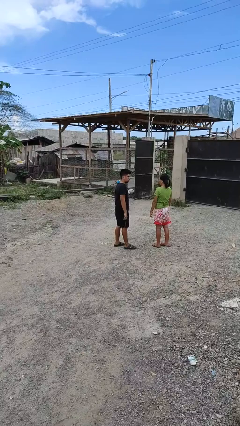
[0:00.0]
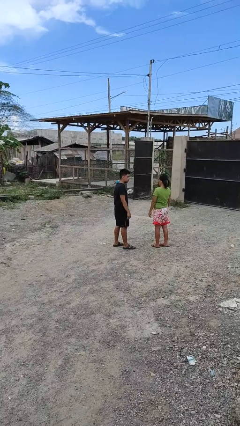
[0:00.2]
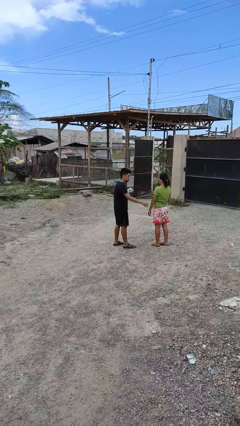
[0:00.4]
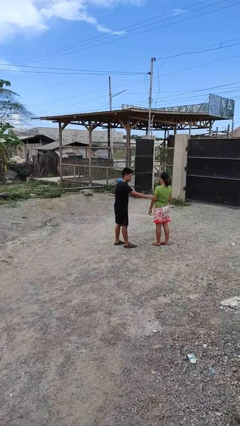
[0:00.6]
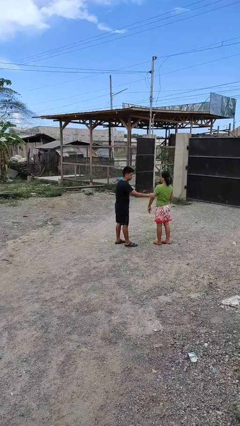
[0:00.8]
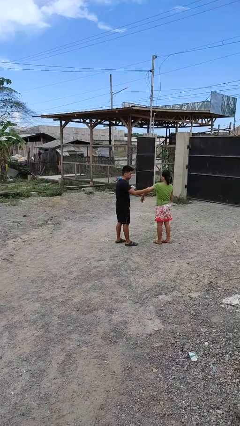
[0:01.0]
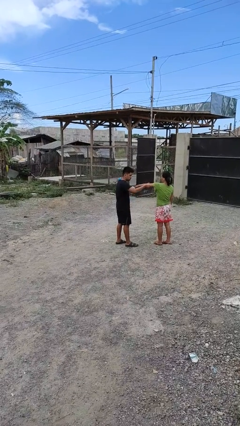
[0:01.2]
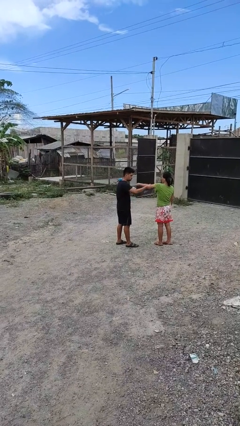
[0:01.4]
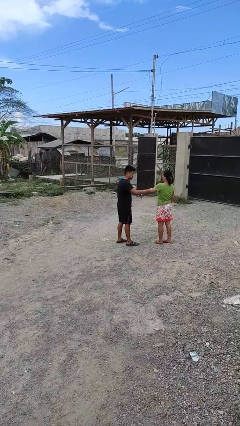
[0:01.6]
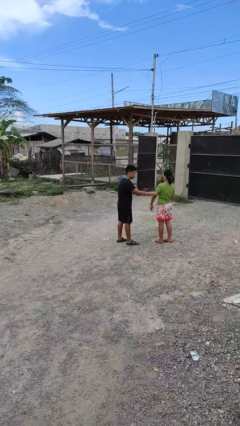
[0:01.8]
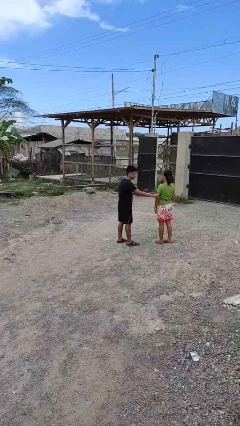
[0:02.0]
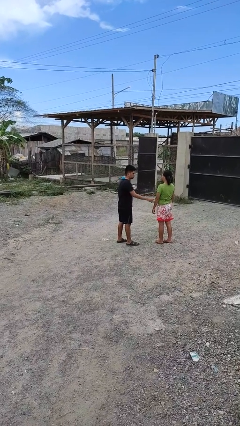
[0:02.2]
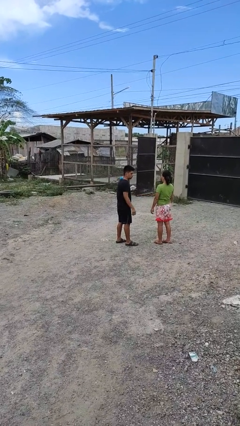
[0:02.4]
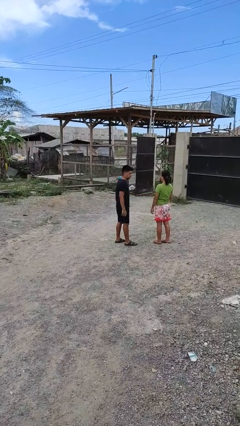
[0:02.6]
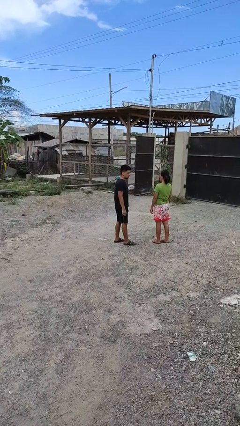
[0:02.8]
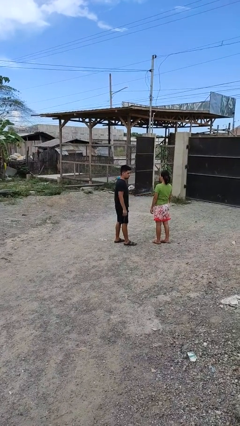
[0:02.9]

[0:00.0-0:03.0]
person grabs person by bicep

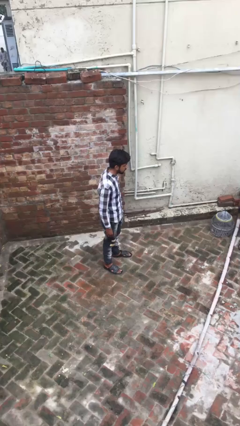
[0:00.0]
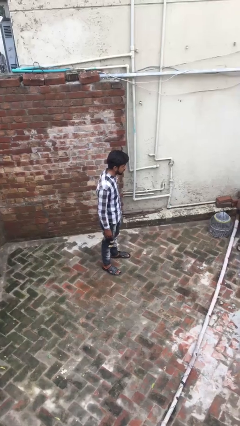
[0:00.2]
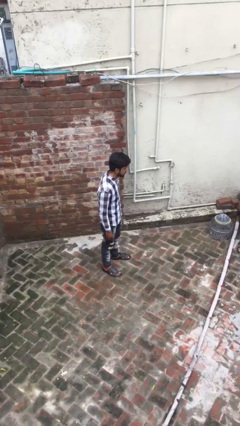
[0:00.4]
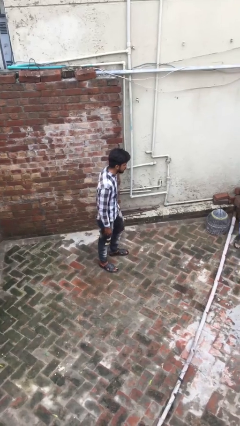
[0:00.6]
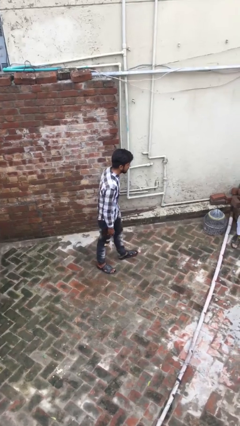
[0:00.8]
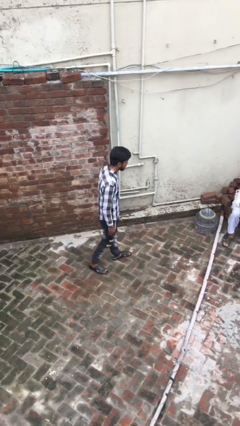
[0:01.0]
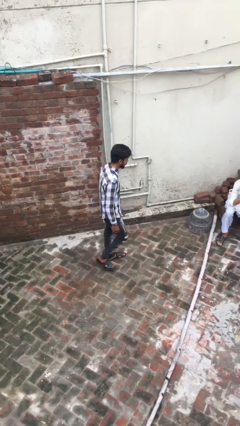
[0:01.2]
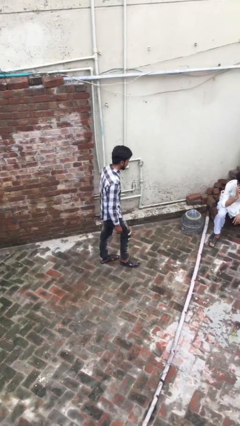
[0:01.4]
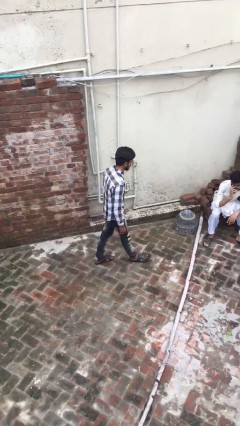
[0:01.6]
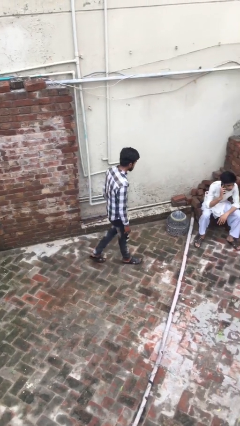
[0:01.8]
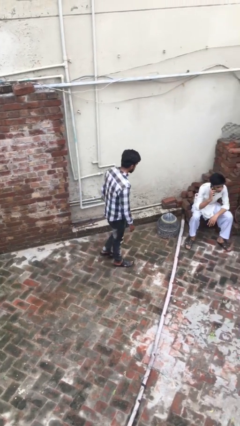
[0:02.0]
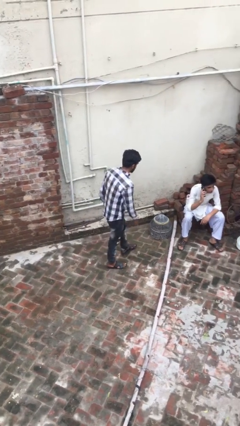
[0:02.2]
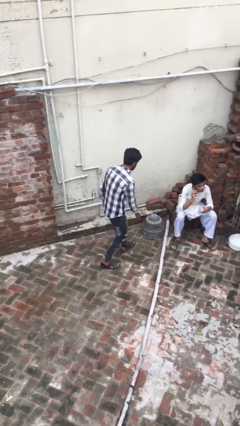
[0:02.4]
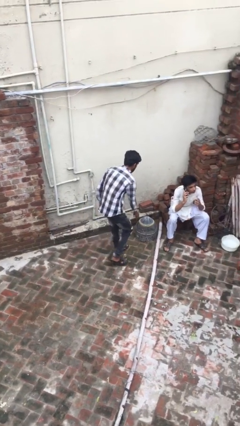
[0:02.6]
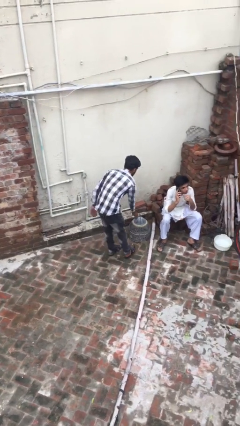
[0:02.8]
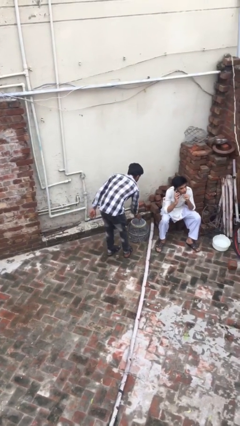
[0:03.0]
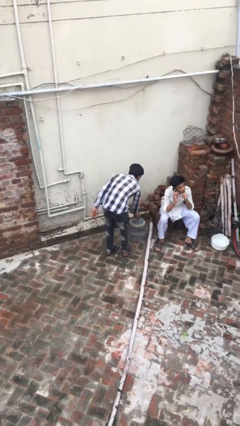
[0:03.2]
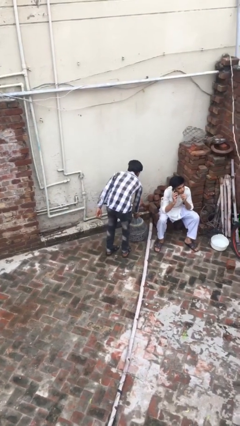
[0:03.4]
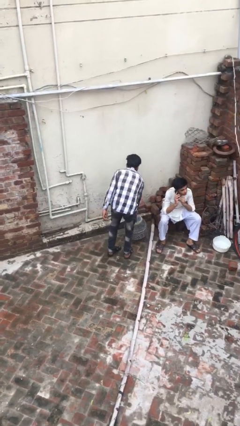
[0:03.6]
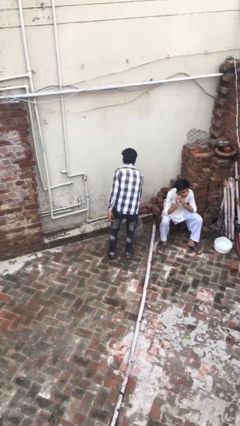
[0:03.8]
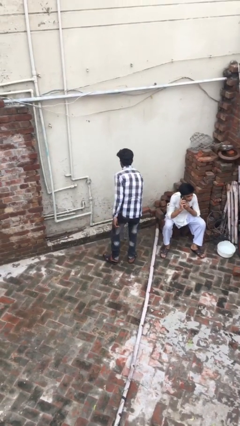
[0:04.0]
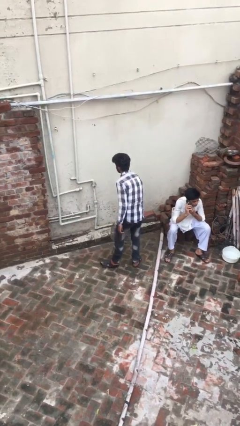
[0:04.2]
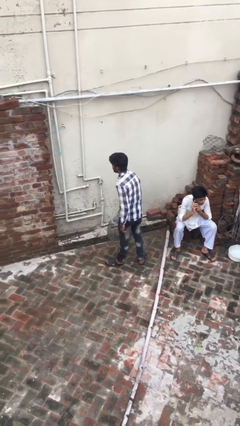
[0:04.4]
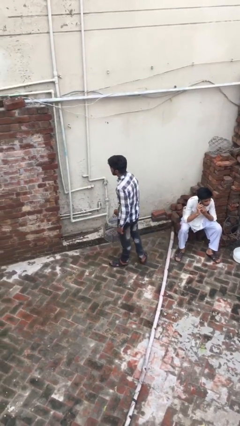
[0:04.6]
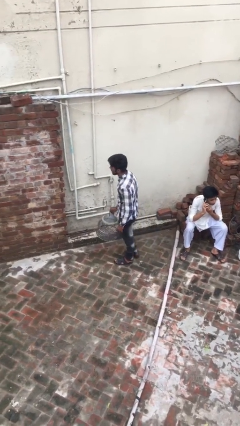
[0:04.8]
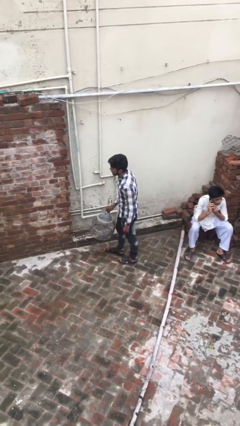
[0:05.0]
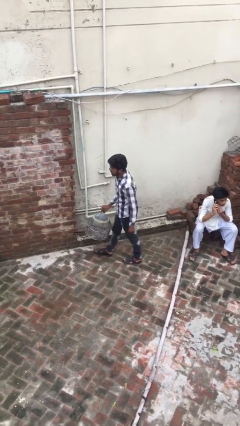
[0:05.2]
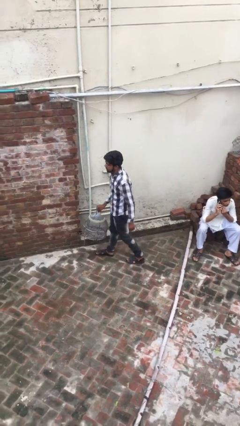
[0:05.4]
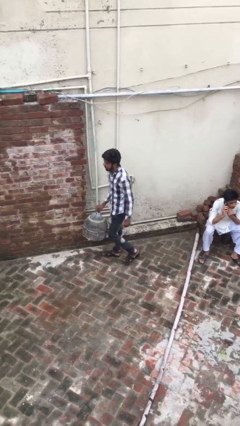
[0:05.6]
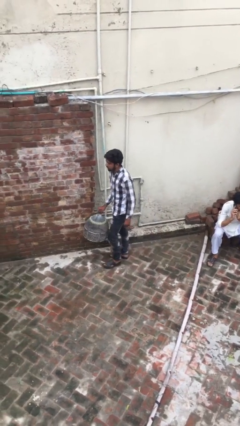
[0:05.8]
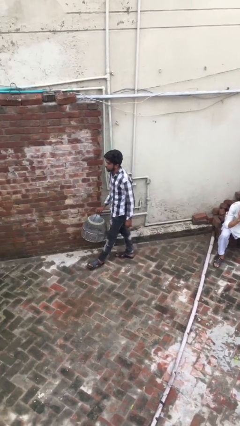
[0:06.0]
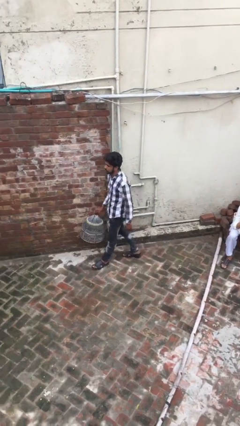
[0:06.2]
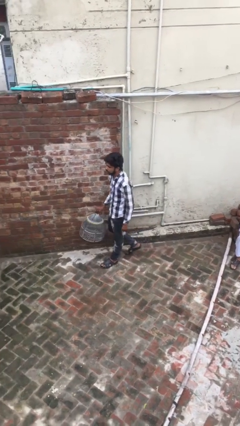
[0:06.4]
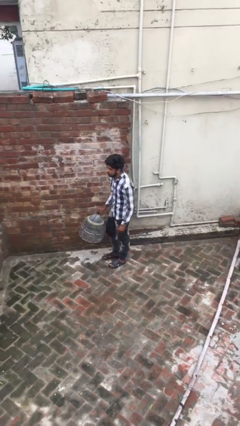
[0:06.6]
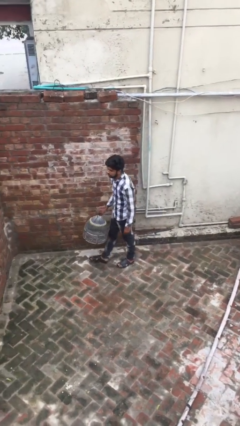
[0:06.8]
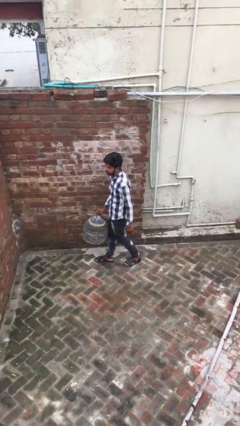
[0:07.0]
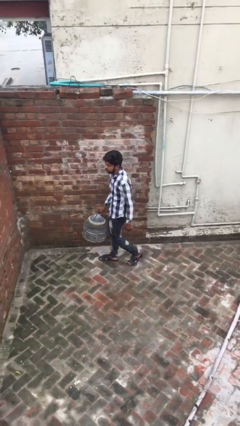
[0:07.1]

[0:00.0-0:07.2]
person steals object from person

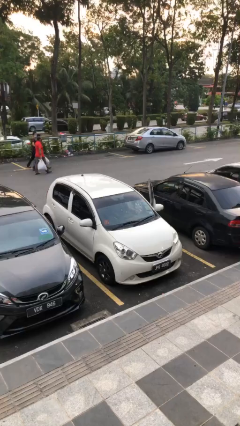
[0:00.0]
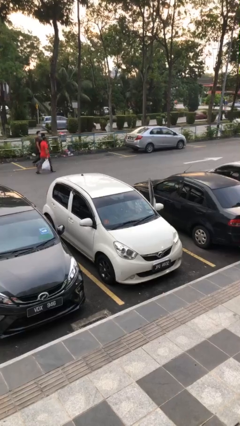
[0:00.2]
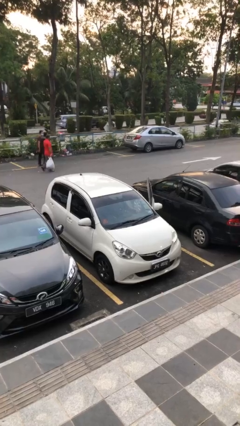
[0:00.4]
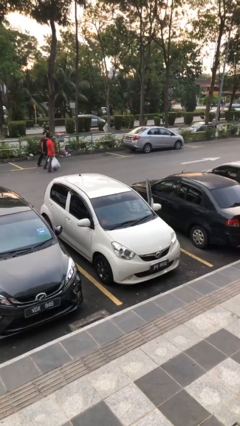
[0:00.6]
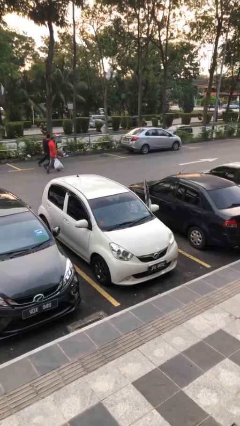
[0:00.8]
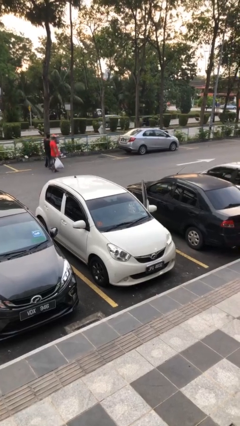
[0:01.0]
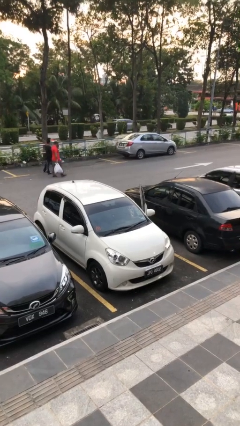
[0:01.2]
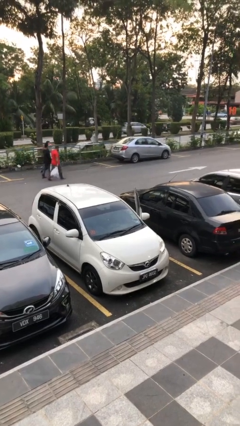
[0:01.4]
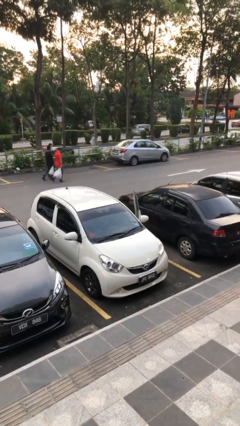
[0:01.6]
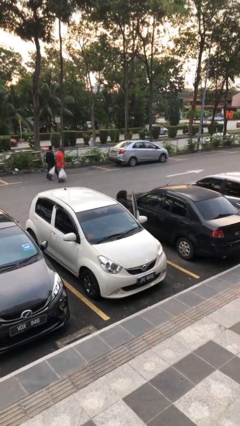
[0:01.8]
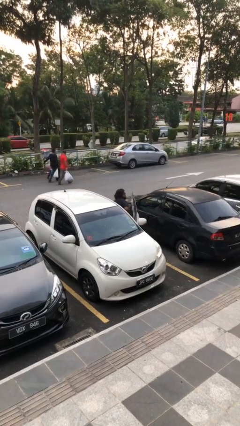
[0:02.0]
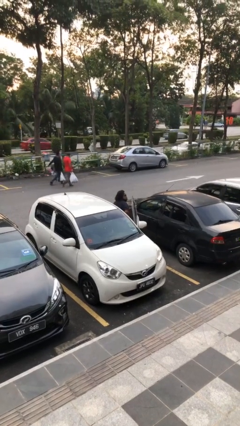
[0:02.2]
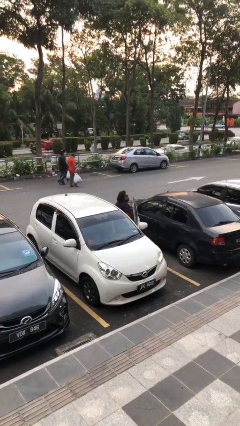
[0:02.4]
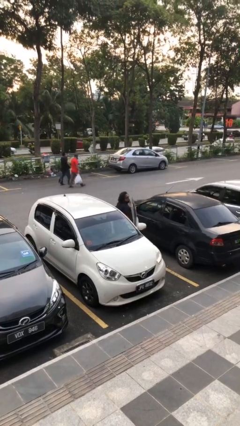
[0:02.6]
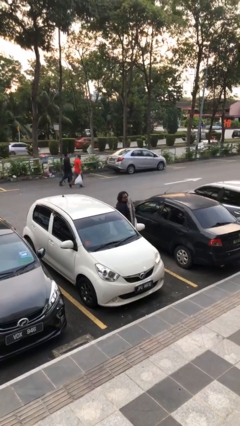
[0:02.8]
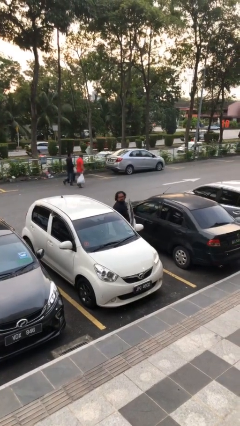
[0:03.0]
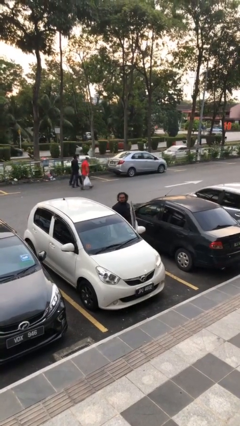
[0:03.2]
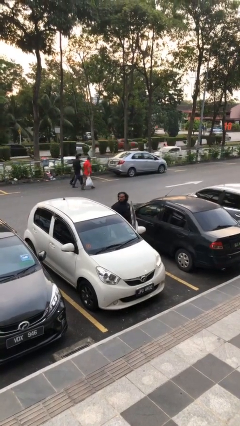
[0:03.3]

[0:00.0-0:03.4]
person exits car

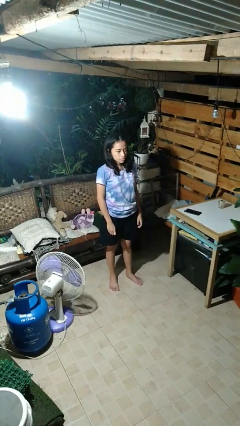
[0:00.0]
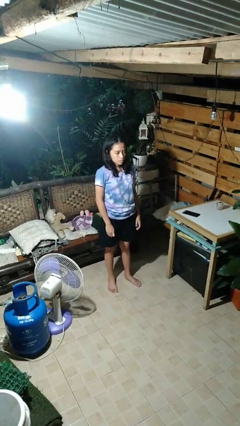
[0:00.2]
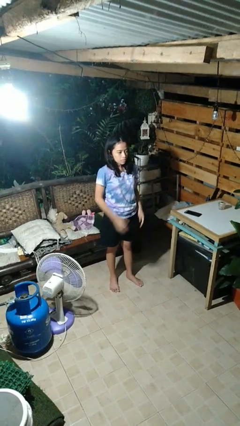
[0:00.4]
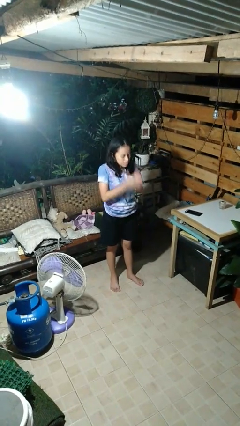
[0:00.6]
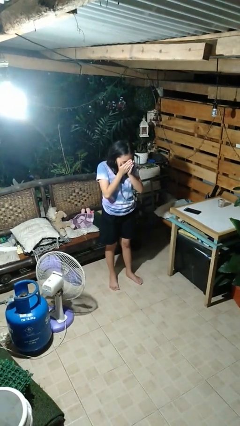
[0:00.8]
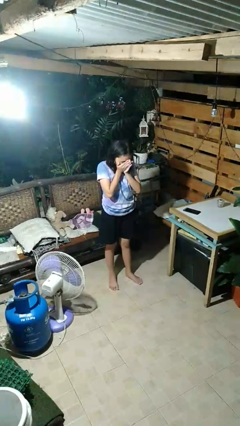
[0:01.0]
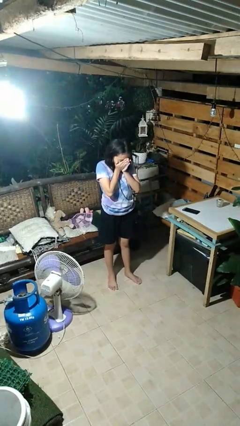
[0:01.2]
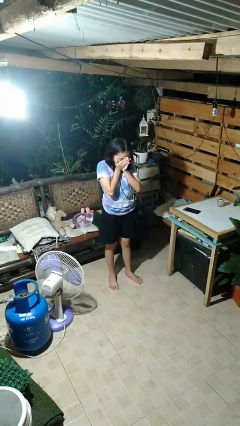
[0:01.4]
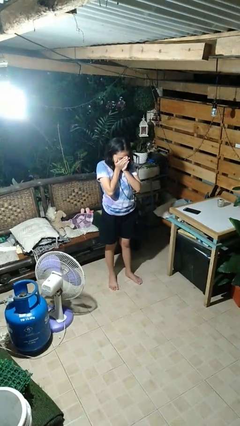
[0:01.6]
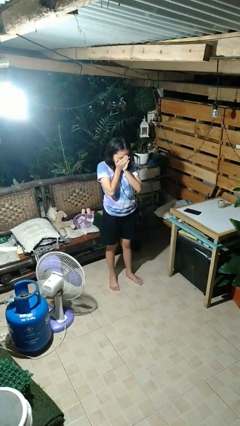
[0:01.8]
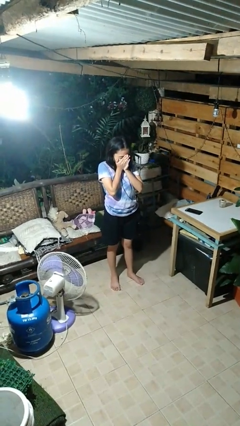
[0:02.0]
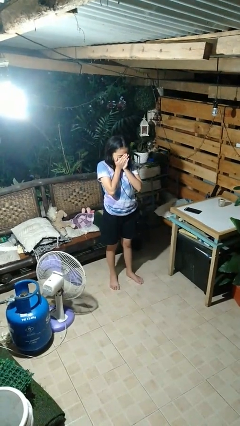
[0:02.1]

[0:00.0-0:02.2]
person sneezes into hand

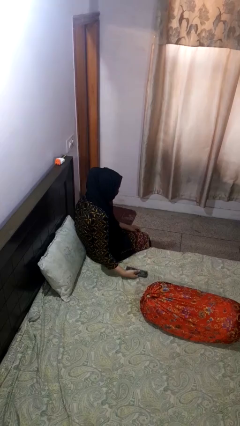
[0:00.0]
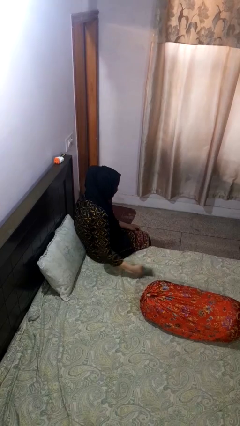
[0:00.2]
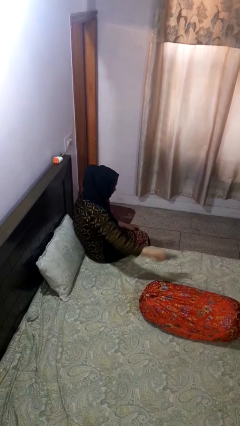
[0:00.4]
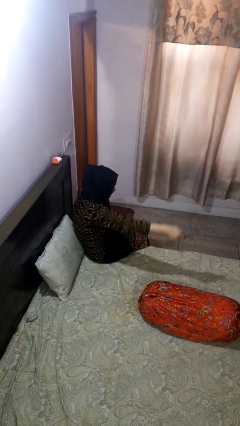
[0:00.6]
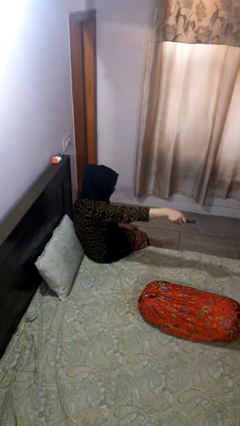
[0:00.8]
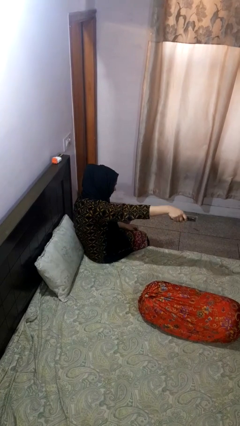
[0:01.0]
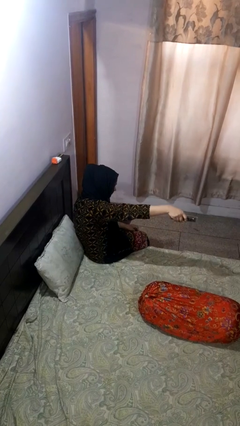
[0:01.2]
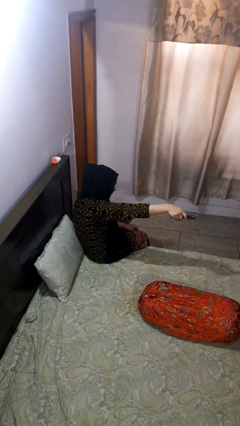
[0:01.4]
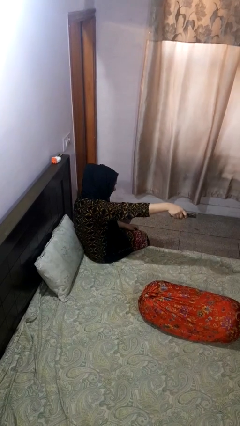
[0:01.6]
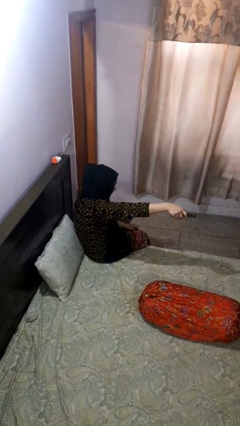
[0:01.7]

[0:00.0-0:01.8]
person uses television remote
